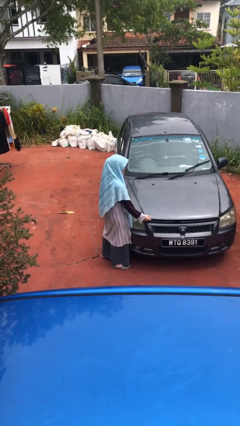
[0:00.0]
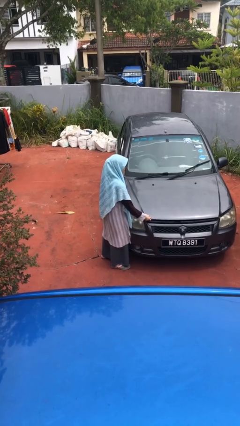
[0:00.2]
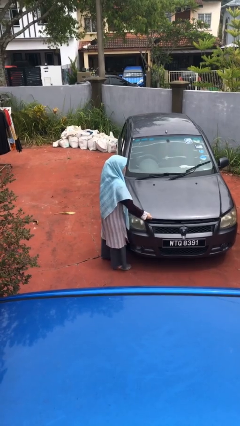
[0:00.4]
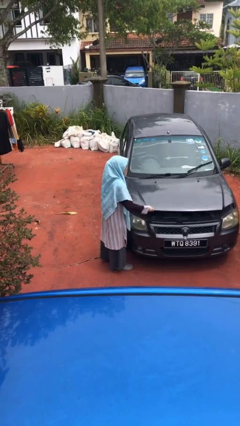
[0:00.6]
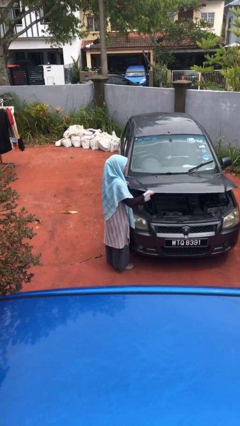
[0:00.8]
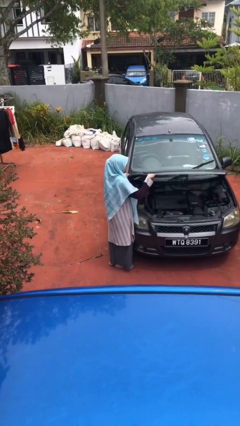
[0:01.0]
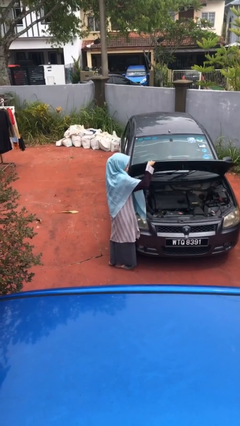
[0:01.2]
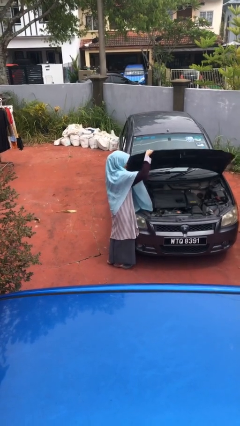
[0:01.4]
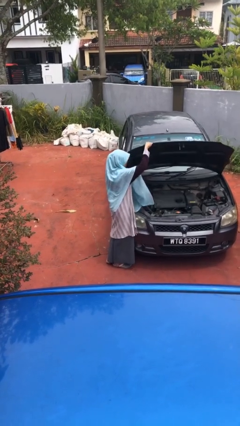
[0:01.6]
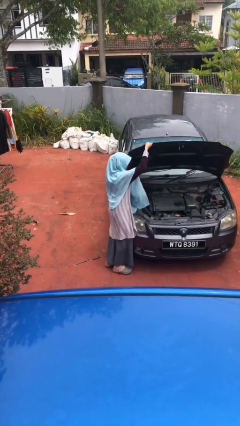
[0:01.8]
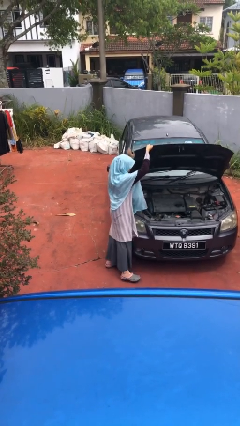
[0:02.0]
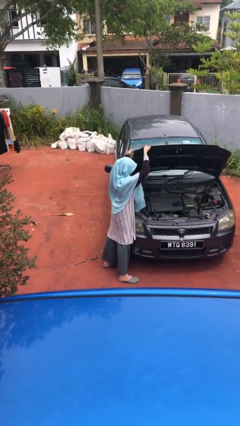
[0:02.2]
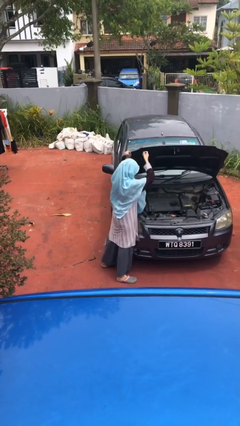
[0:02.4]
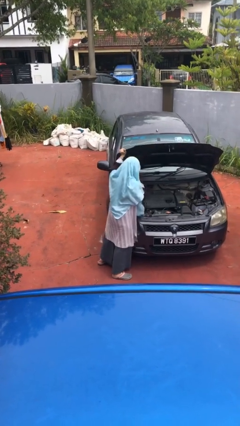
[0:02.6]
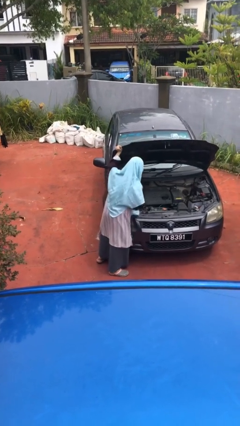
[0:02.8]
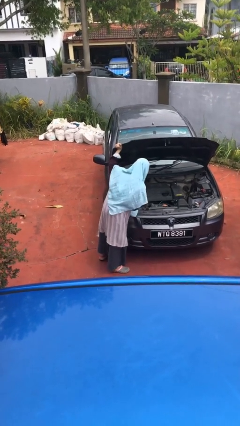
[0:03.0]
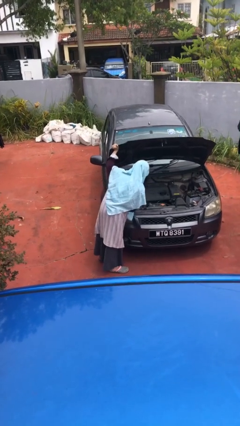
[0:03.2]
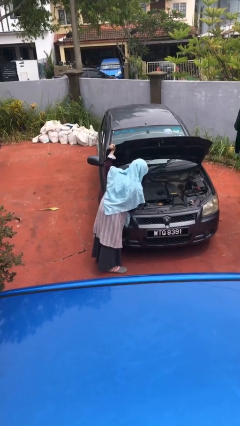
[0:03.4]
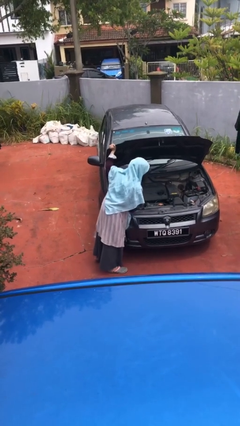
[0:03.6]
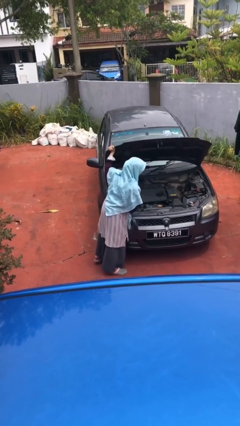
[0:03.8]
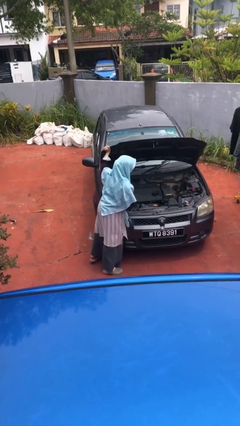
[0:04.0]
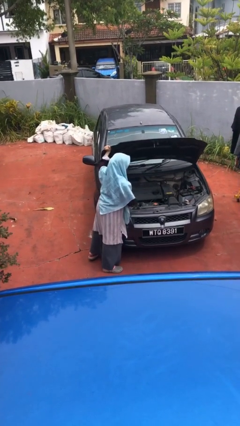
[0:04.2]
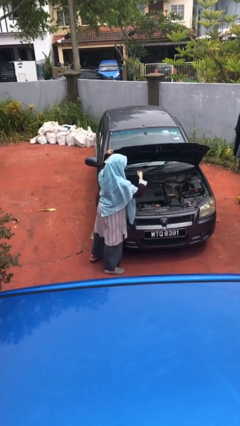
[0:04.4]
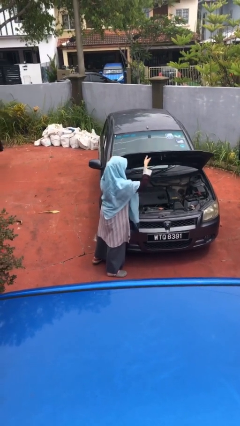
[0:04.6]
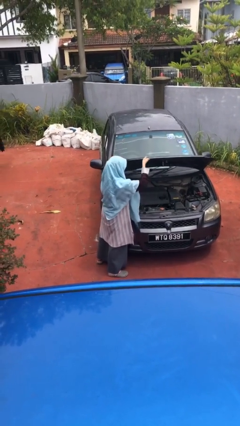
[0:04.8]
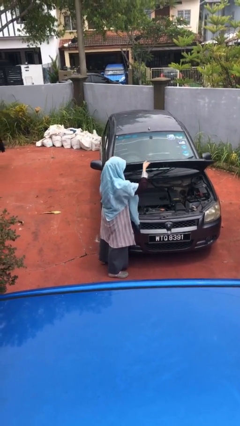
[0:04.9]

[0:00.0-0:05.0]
person opens car hood

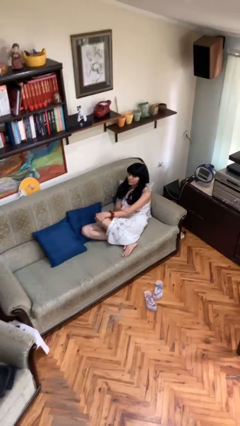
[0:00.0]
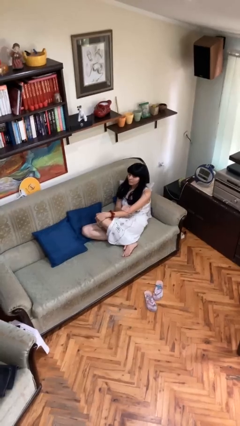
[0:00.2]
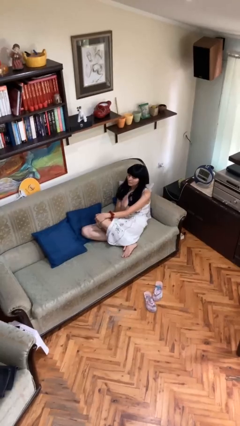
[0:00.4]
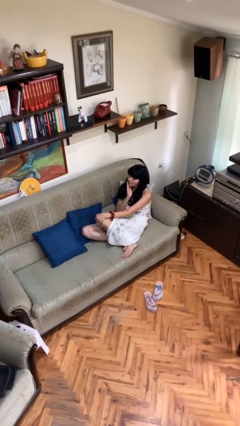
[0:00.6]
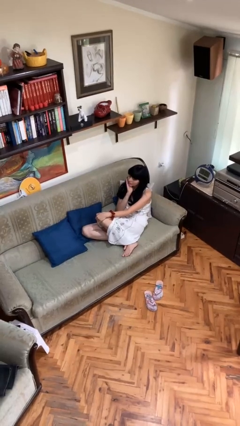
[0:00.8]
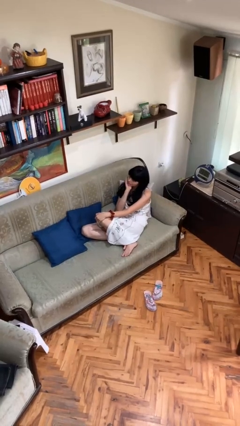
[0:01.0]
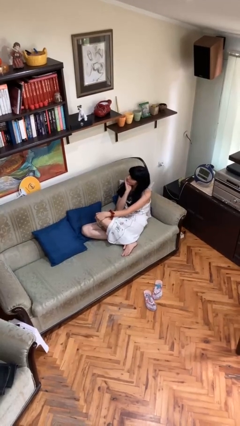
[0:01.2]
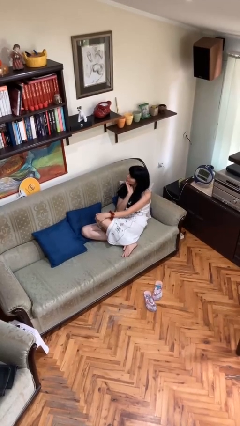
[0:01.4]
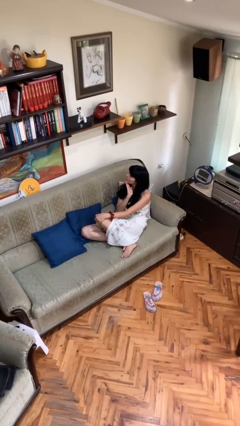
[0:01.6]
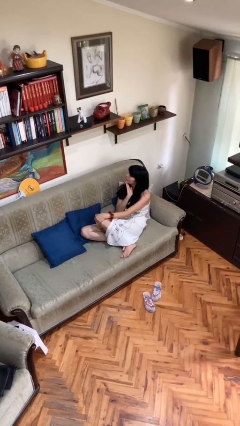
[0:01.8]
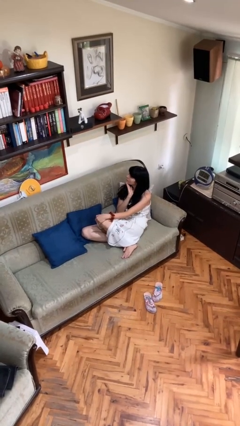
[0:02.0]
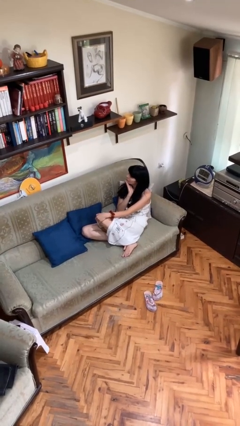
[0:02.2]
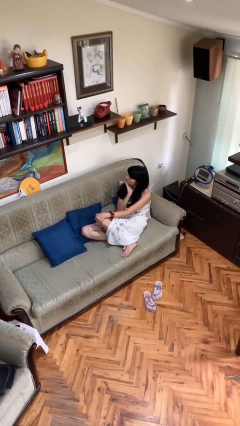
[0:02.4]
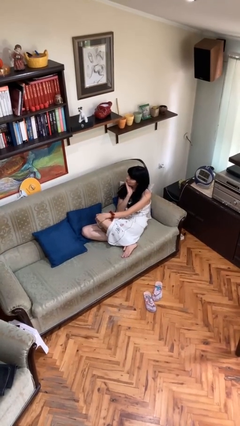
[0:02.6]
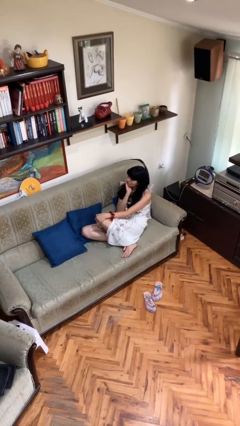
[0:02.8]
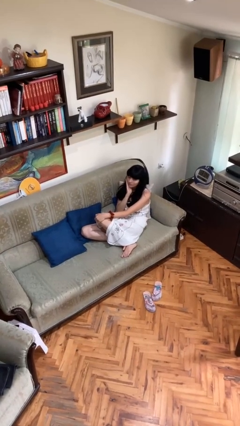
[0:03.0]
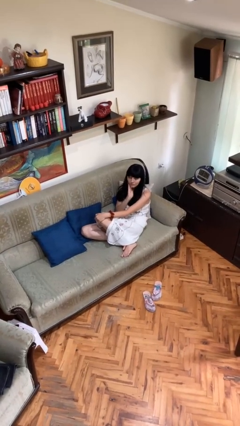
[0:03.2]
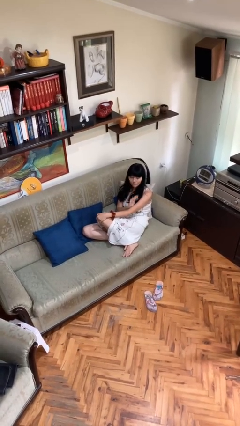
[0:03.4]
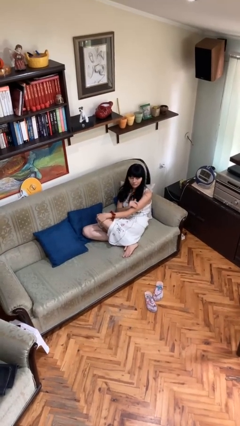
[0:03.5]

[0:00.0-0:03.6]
person strokes chin

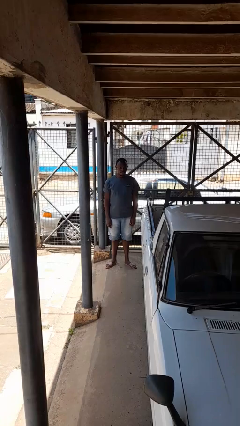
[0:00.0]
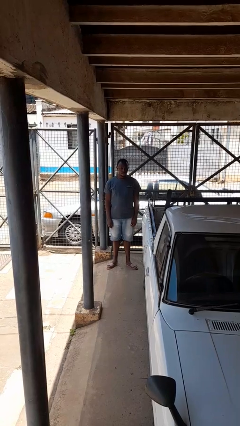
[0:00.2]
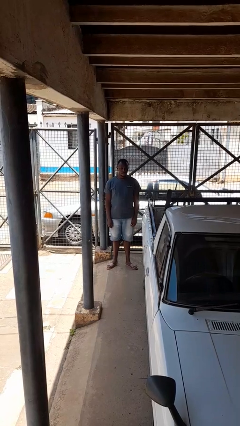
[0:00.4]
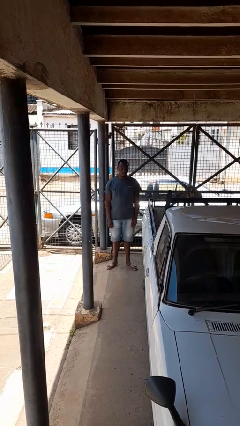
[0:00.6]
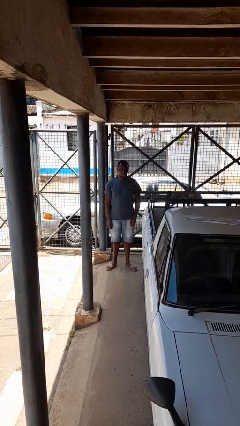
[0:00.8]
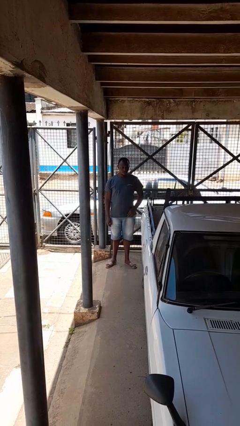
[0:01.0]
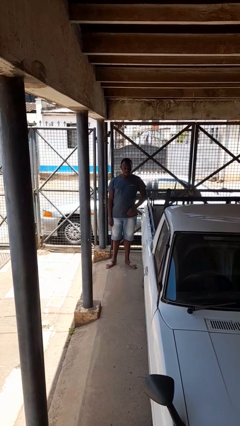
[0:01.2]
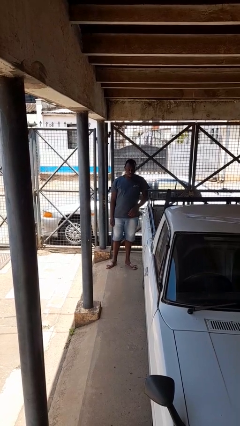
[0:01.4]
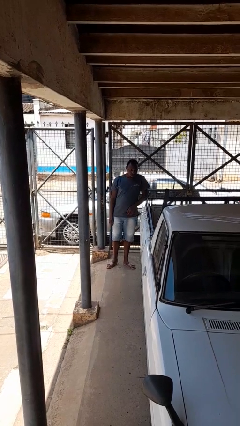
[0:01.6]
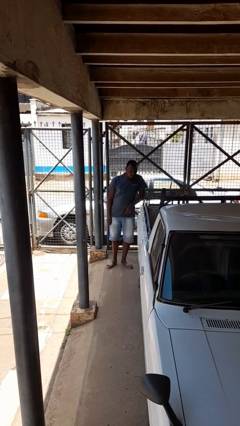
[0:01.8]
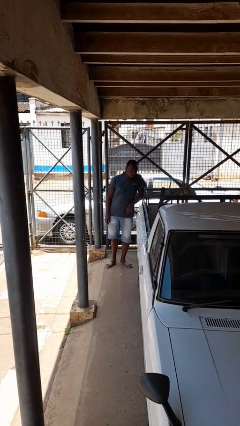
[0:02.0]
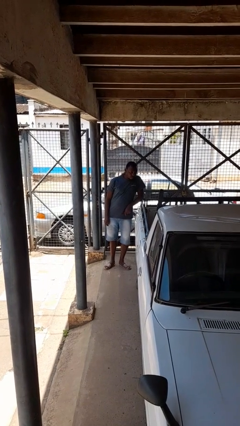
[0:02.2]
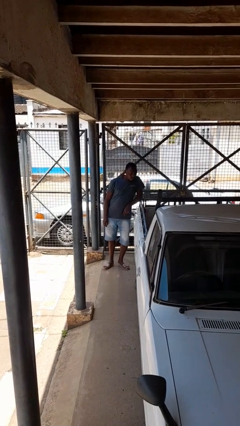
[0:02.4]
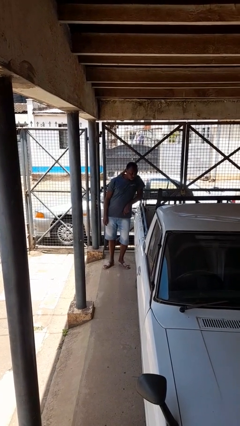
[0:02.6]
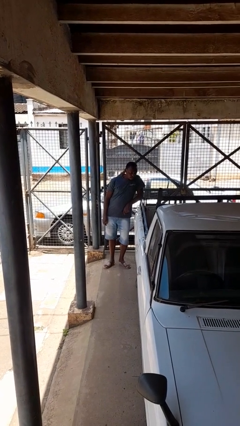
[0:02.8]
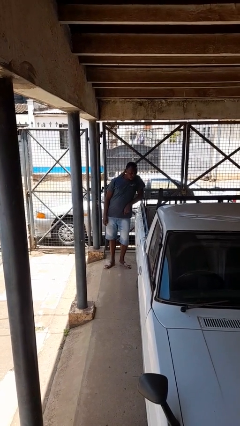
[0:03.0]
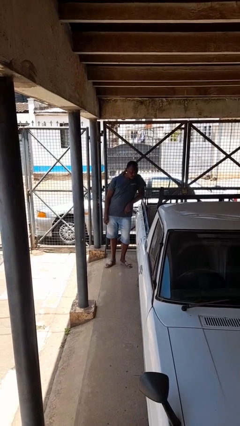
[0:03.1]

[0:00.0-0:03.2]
person leans against car

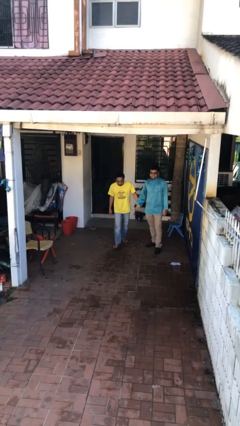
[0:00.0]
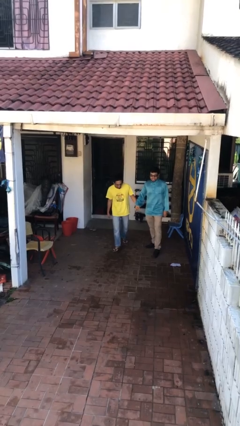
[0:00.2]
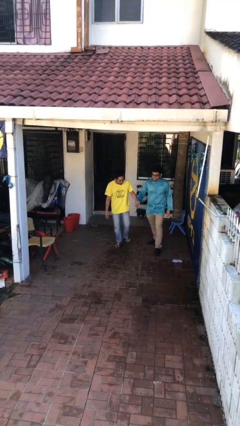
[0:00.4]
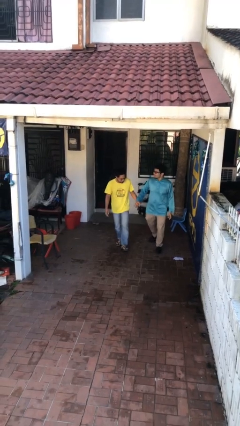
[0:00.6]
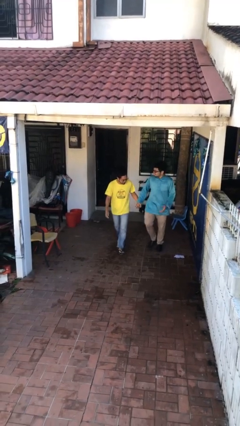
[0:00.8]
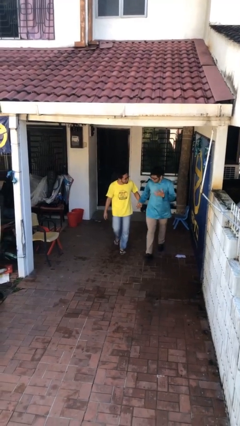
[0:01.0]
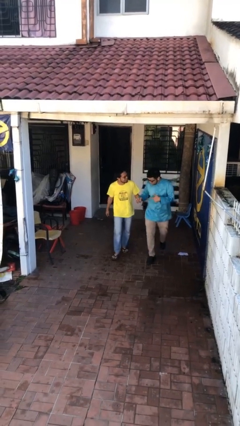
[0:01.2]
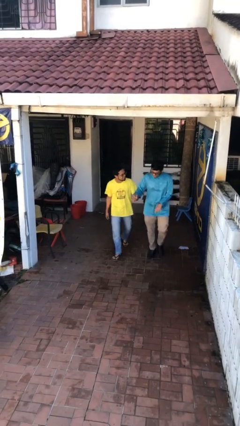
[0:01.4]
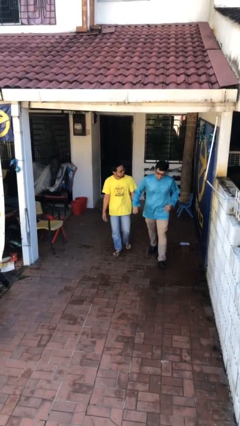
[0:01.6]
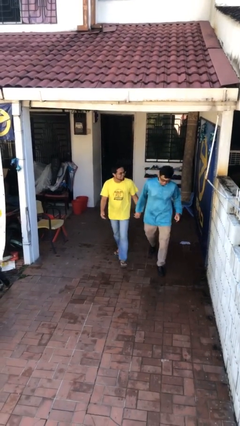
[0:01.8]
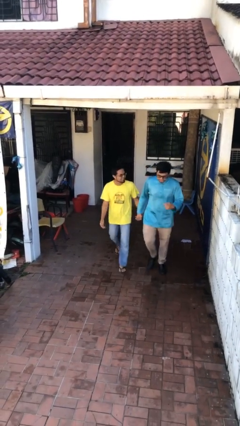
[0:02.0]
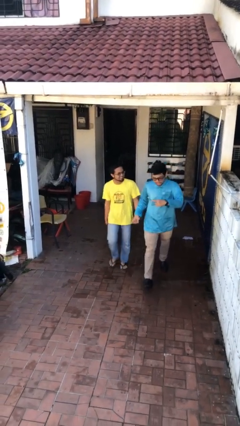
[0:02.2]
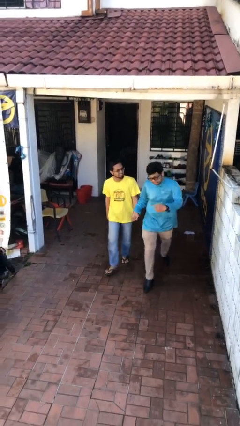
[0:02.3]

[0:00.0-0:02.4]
person holds hand

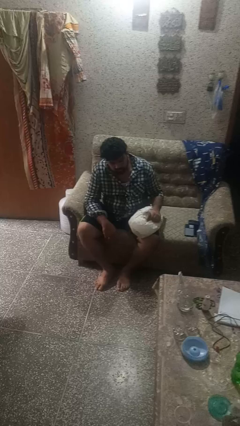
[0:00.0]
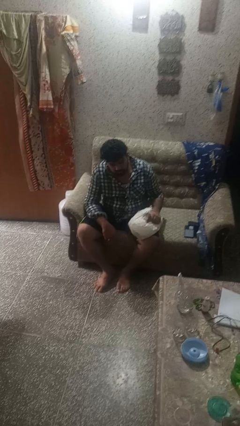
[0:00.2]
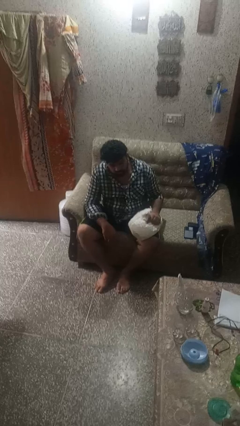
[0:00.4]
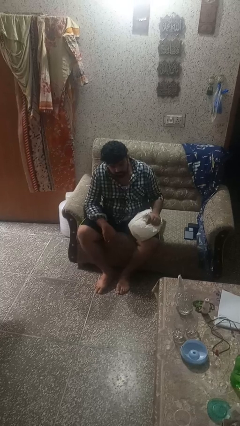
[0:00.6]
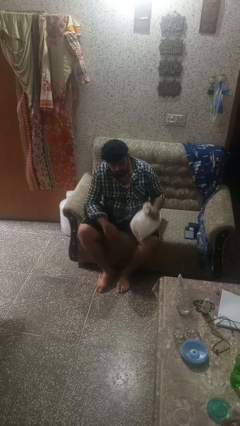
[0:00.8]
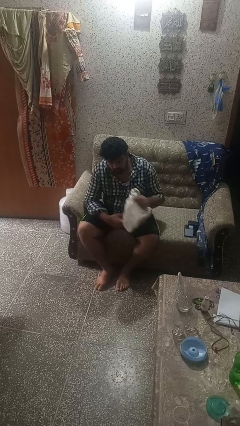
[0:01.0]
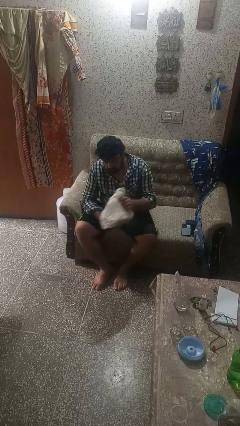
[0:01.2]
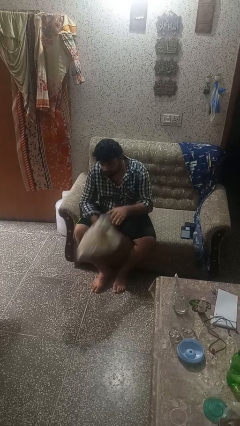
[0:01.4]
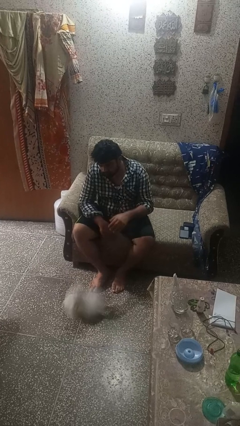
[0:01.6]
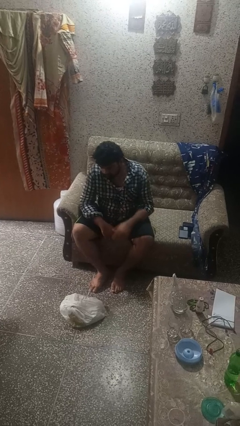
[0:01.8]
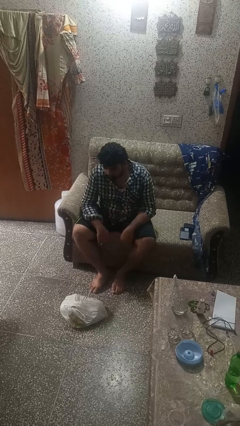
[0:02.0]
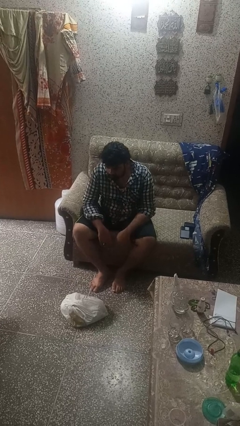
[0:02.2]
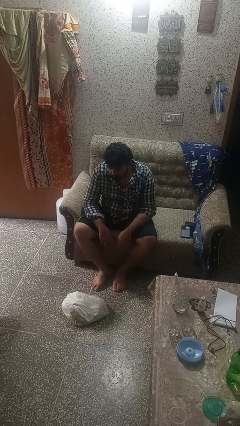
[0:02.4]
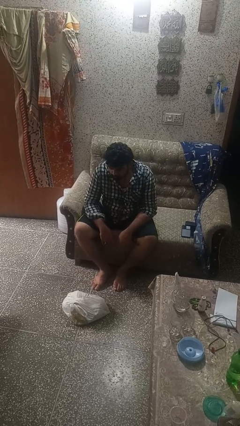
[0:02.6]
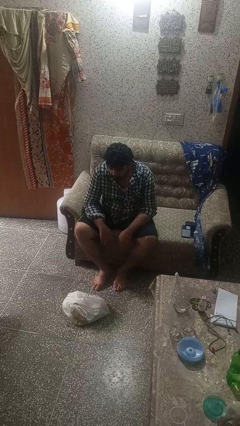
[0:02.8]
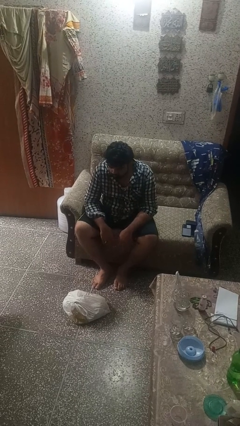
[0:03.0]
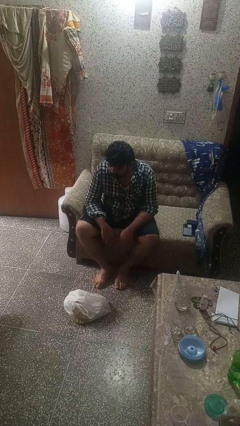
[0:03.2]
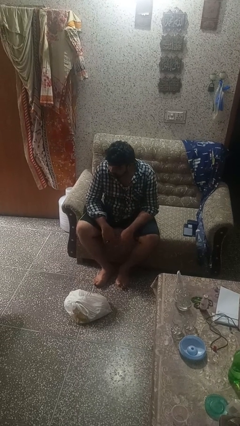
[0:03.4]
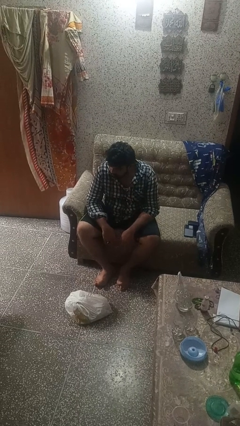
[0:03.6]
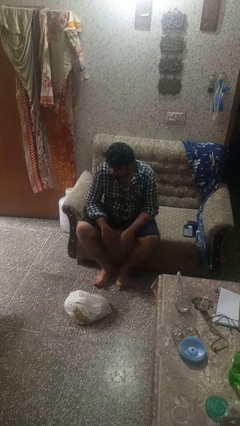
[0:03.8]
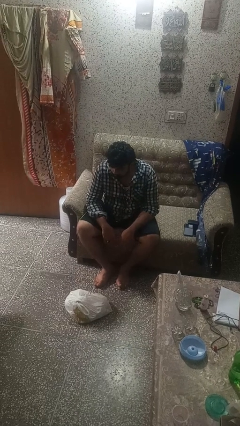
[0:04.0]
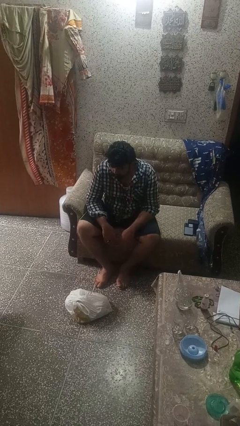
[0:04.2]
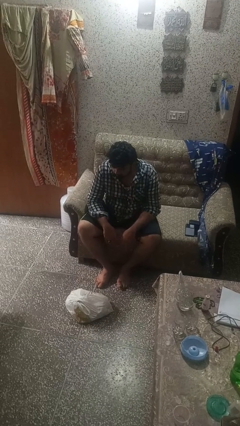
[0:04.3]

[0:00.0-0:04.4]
person throws object to ground
